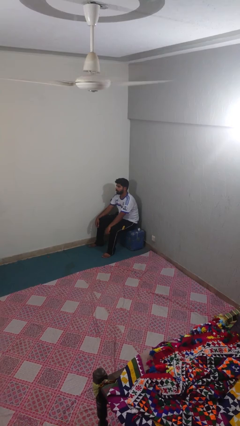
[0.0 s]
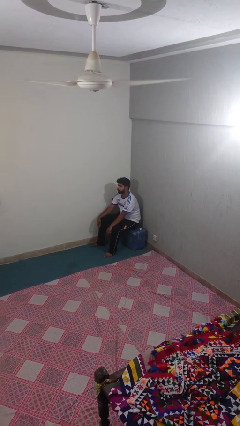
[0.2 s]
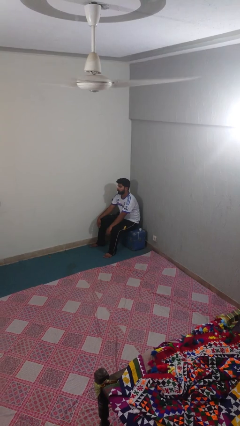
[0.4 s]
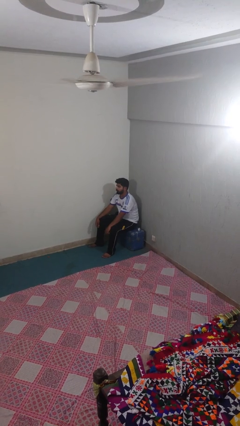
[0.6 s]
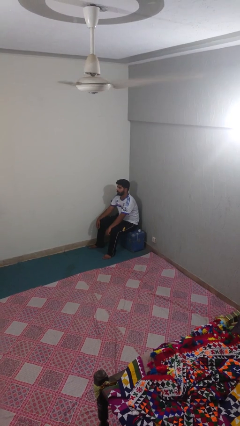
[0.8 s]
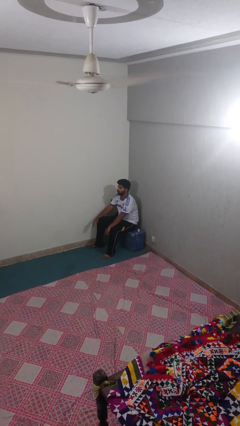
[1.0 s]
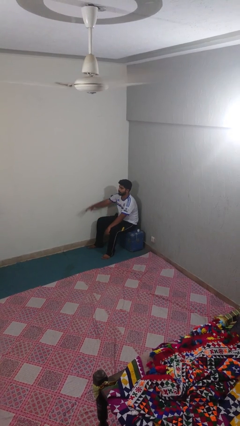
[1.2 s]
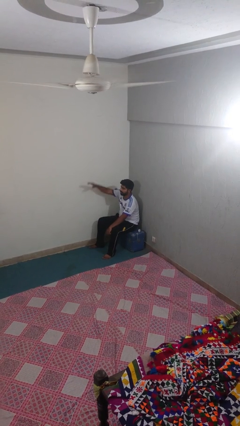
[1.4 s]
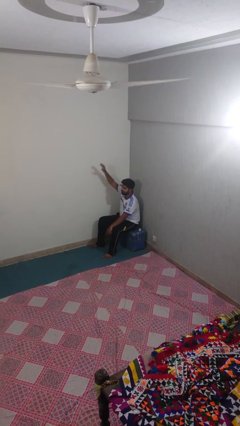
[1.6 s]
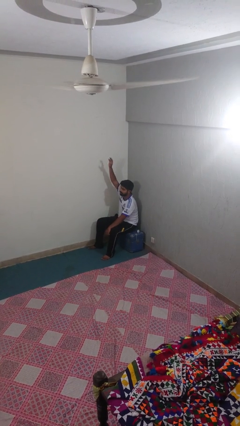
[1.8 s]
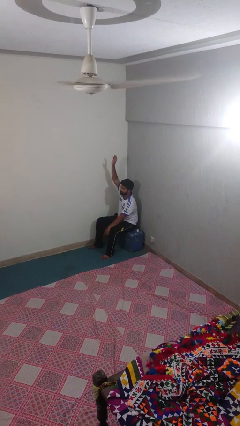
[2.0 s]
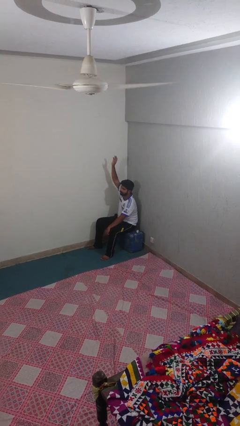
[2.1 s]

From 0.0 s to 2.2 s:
person gestures raise hand

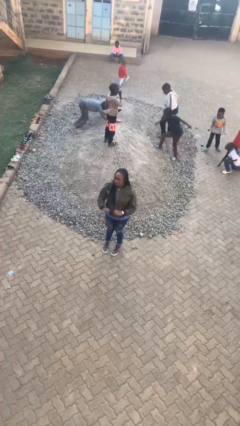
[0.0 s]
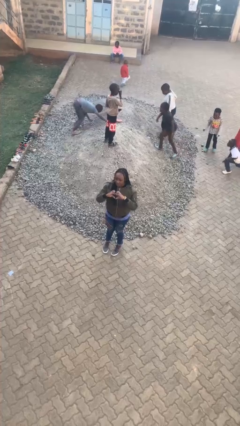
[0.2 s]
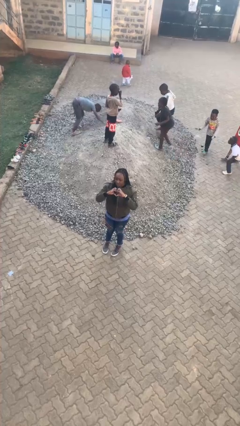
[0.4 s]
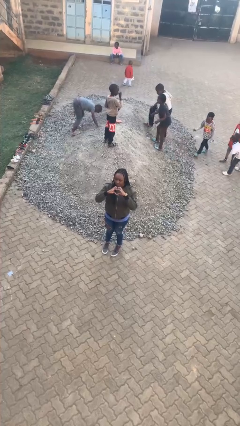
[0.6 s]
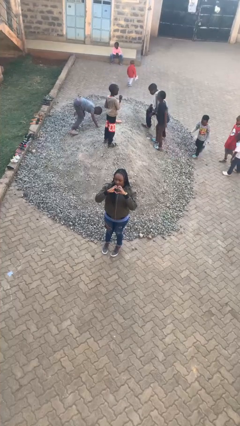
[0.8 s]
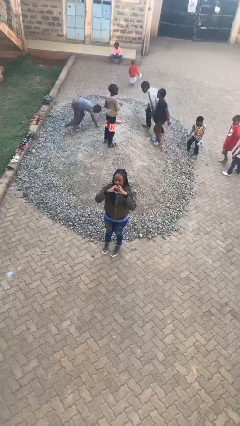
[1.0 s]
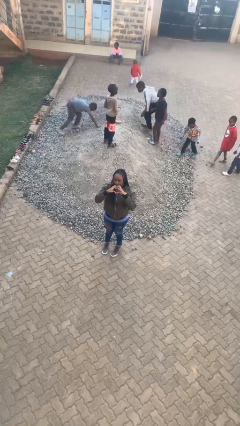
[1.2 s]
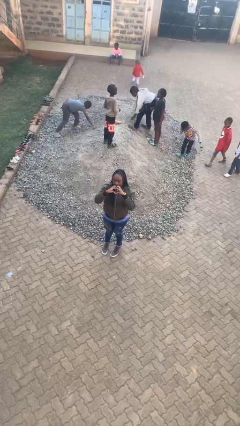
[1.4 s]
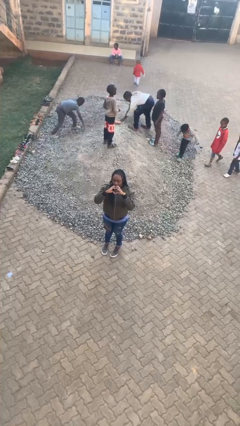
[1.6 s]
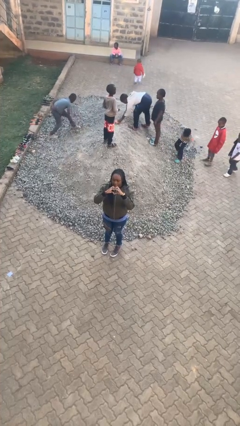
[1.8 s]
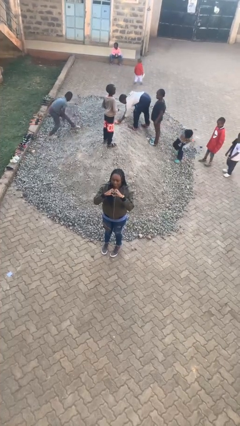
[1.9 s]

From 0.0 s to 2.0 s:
person gestures heart

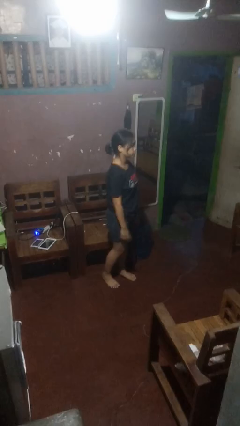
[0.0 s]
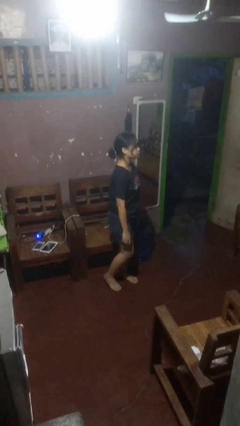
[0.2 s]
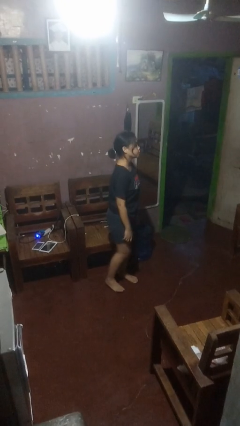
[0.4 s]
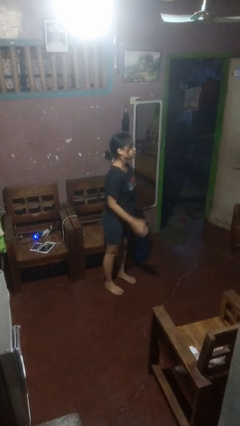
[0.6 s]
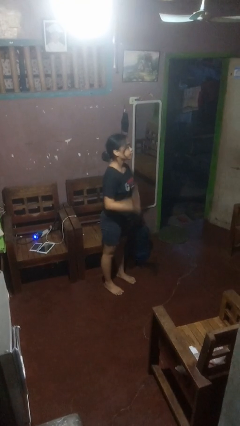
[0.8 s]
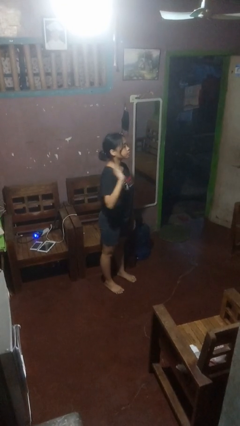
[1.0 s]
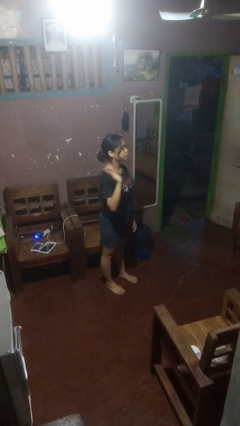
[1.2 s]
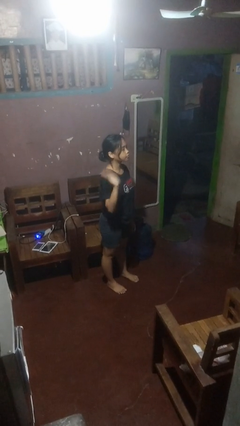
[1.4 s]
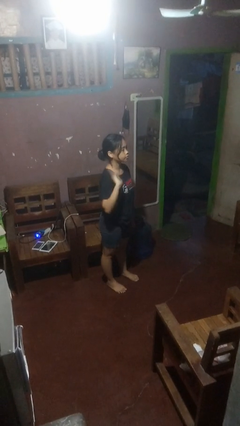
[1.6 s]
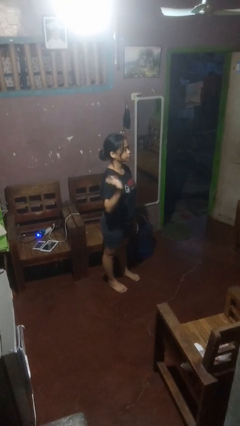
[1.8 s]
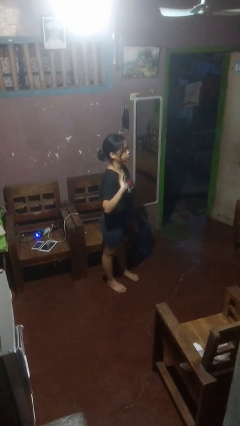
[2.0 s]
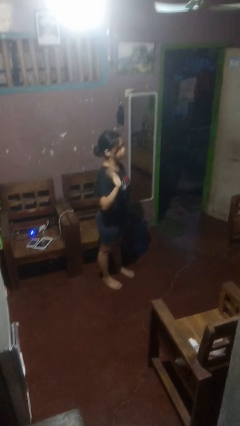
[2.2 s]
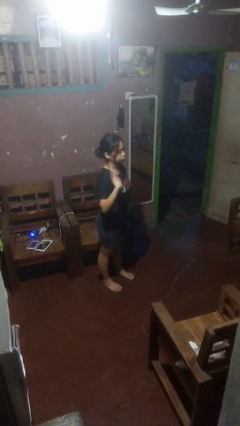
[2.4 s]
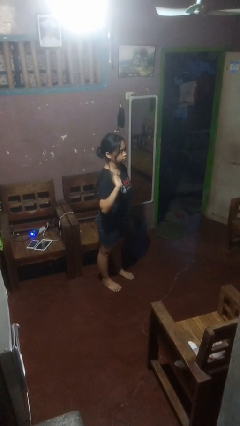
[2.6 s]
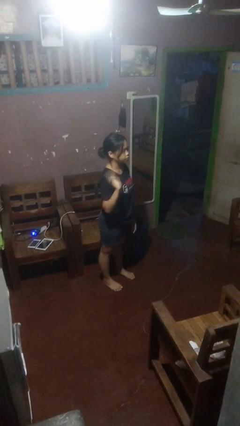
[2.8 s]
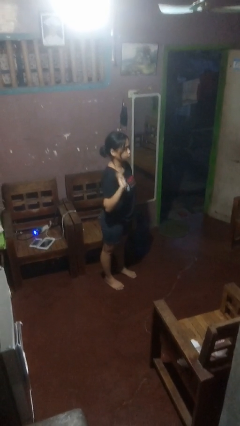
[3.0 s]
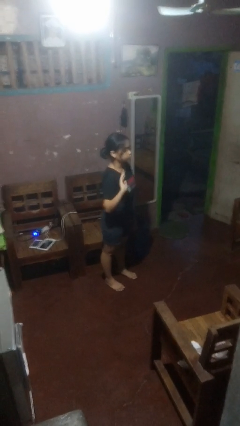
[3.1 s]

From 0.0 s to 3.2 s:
person waves at person

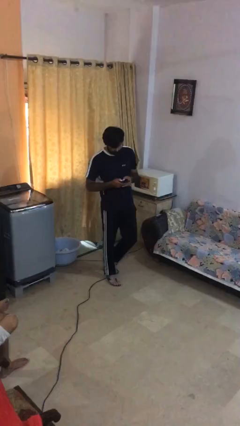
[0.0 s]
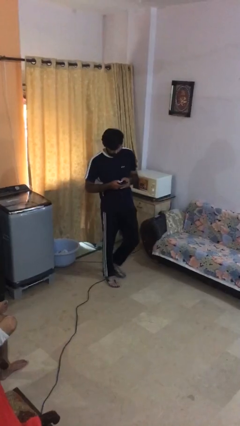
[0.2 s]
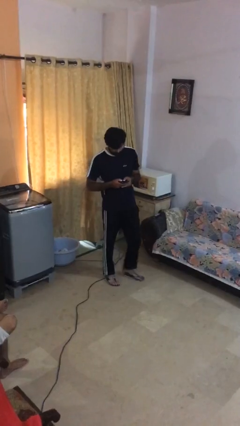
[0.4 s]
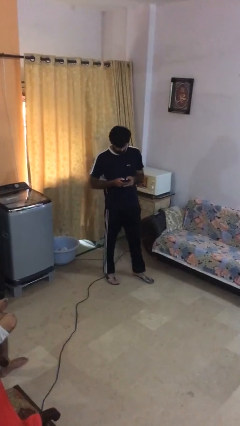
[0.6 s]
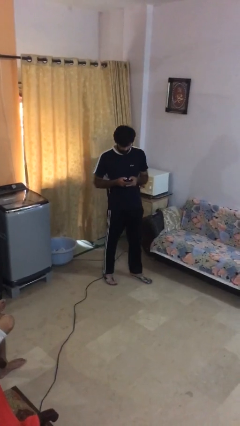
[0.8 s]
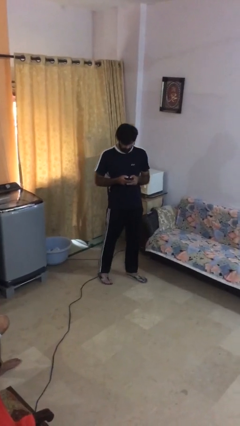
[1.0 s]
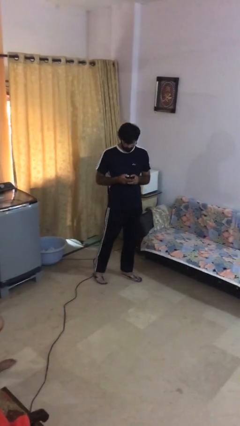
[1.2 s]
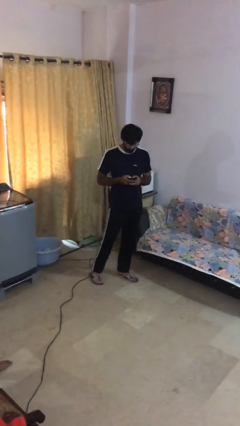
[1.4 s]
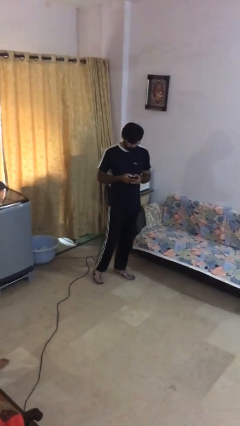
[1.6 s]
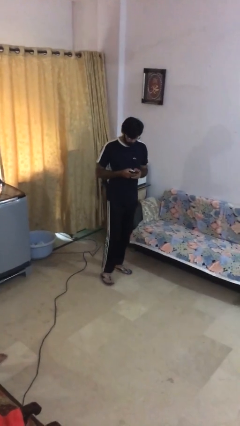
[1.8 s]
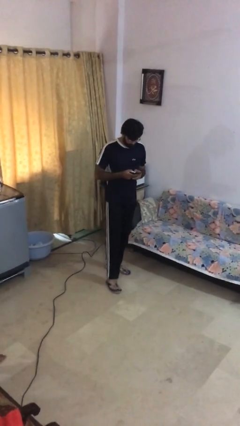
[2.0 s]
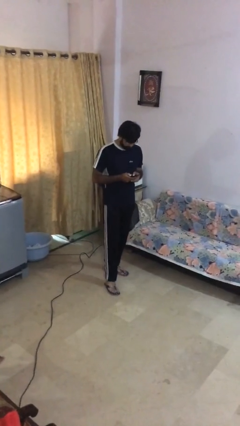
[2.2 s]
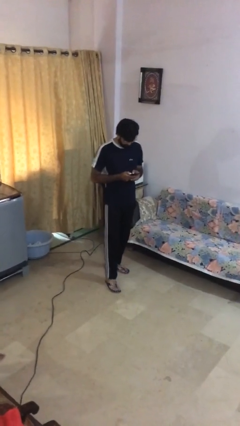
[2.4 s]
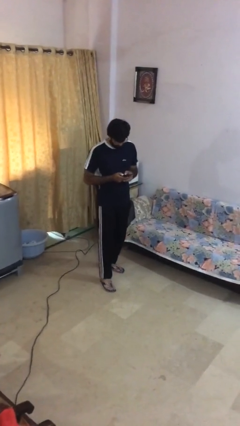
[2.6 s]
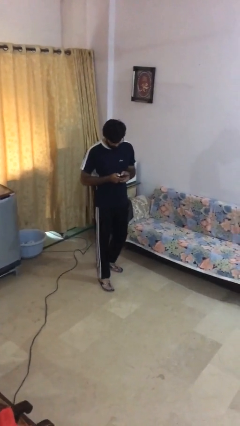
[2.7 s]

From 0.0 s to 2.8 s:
person texts on phone

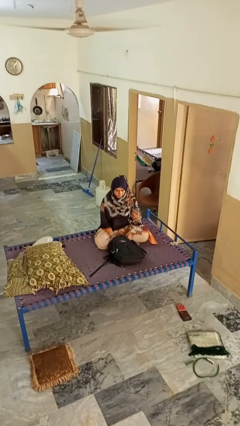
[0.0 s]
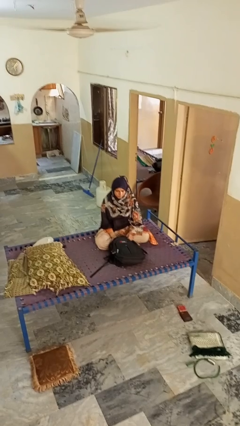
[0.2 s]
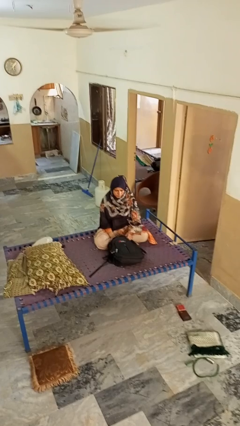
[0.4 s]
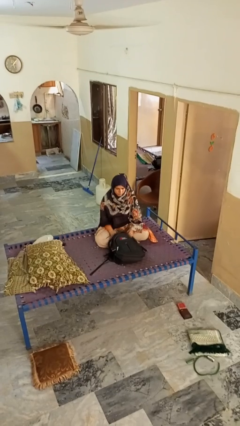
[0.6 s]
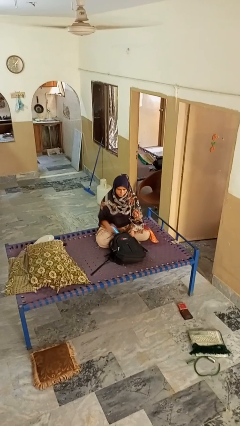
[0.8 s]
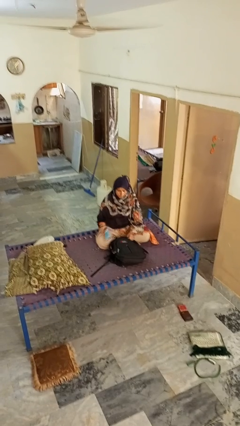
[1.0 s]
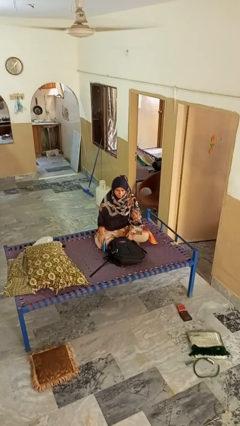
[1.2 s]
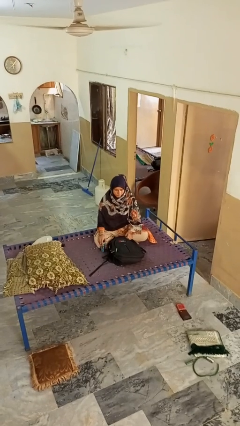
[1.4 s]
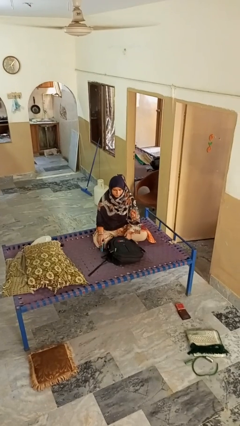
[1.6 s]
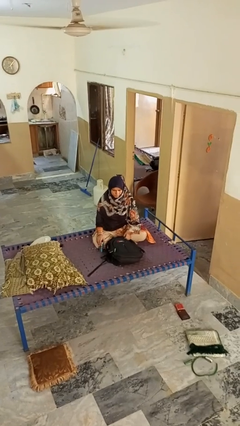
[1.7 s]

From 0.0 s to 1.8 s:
person takes object from bag

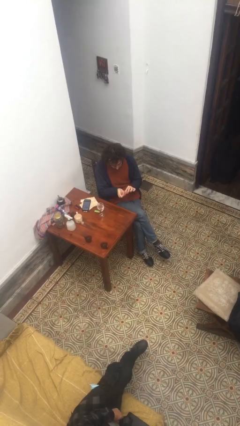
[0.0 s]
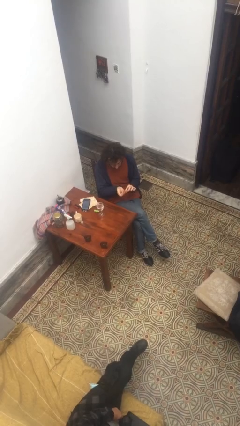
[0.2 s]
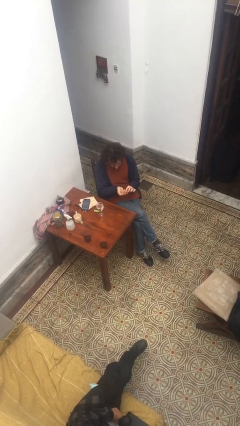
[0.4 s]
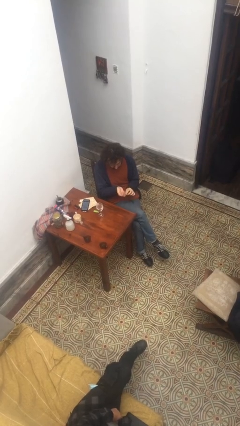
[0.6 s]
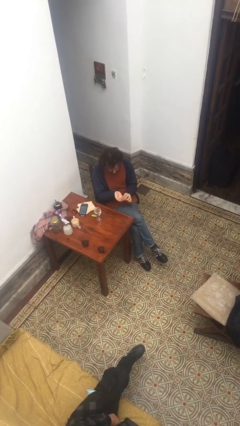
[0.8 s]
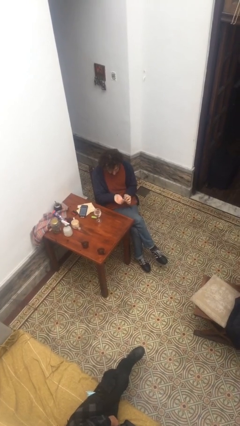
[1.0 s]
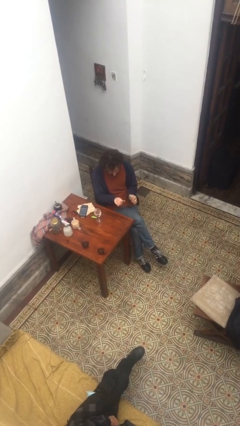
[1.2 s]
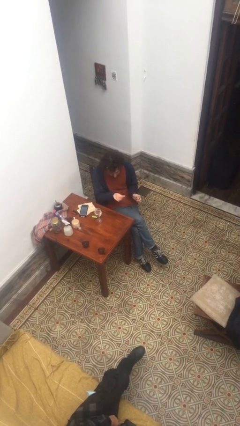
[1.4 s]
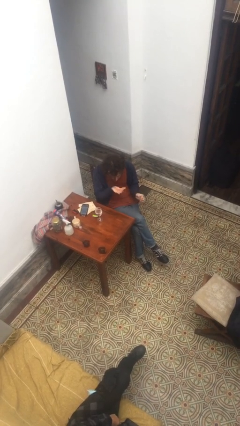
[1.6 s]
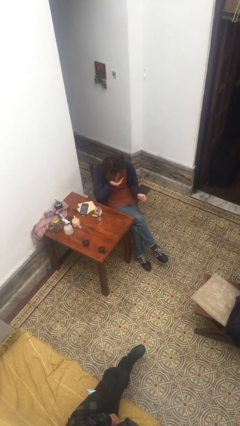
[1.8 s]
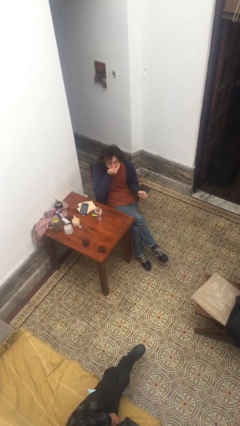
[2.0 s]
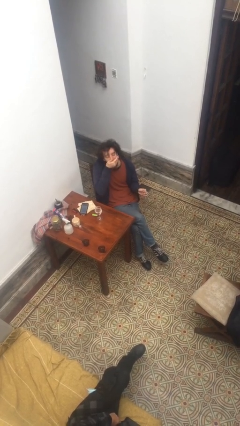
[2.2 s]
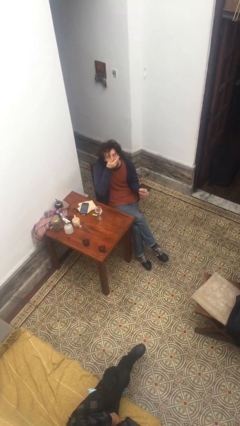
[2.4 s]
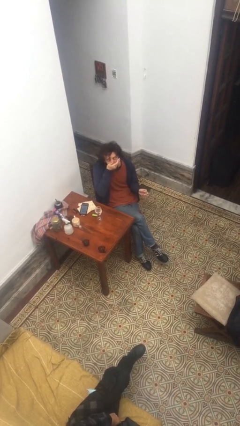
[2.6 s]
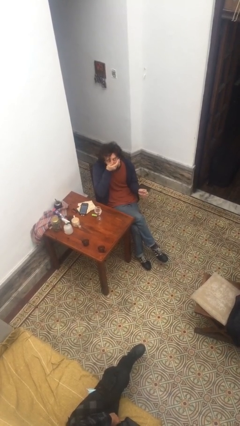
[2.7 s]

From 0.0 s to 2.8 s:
person takes medicine pills

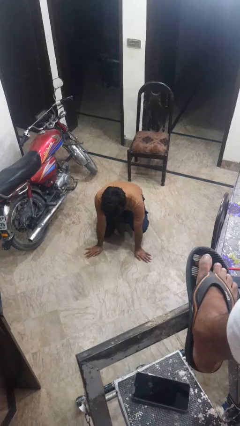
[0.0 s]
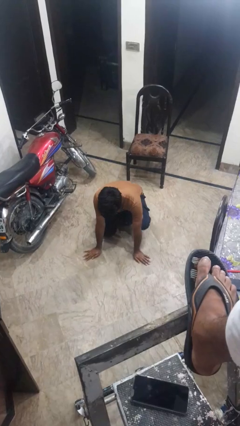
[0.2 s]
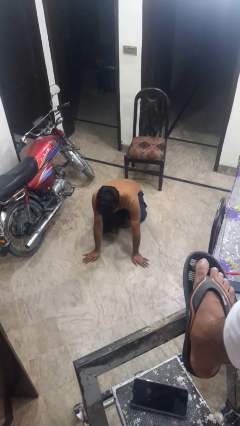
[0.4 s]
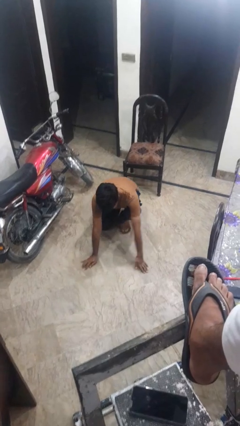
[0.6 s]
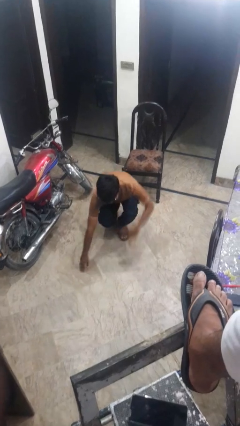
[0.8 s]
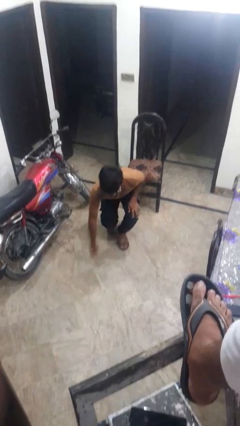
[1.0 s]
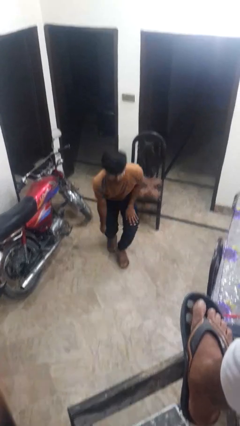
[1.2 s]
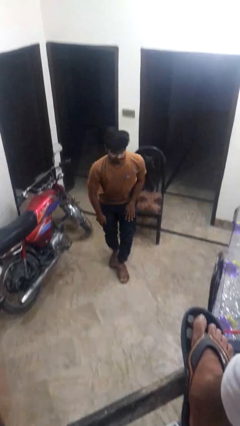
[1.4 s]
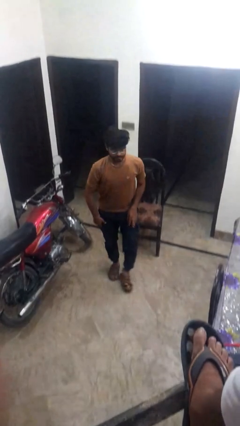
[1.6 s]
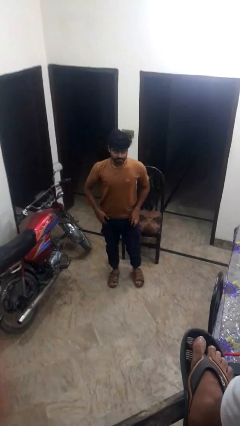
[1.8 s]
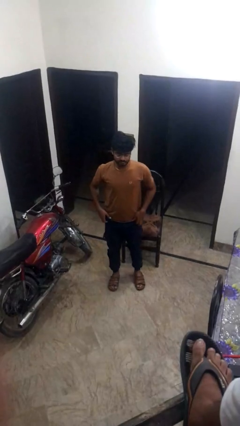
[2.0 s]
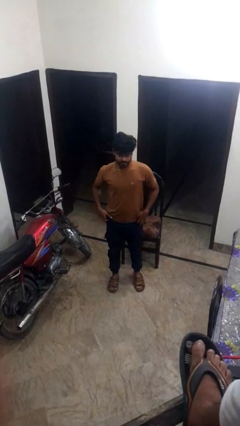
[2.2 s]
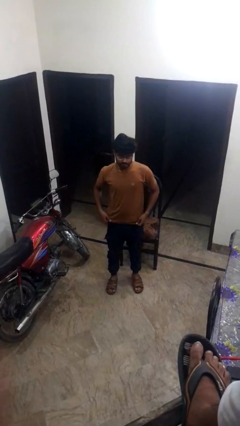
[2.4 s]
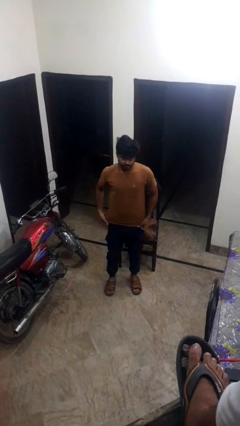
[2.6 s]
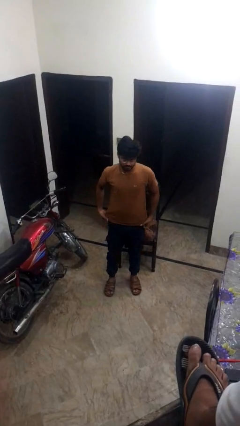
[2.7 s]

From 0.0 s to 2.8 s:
person stands up from floor
